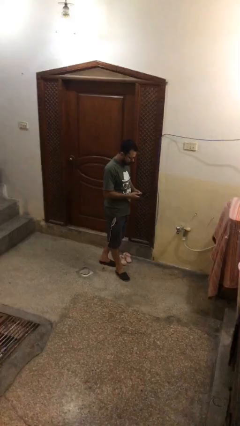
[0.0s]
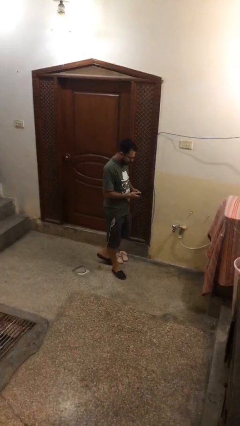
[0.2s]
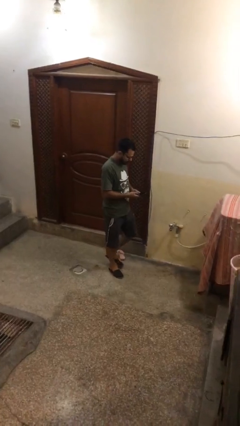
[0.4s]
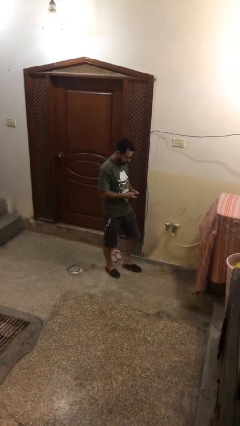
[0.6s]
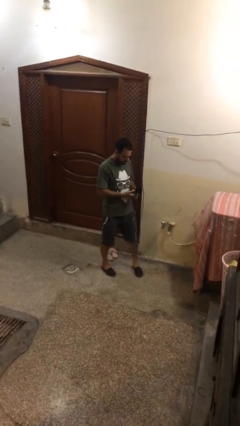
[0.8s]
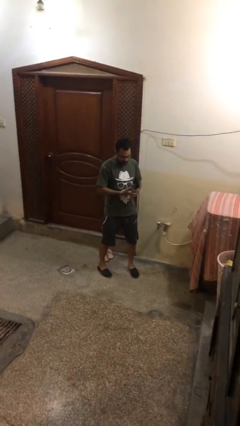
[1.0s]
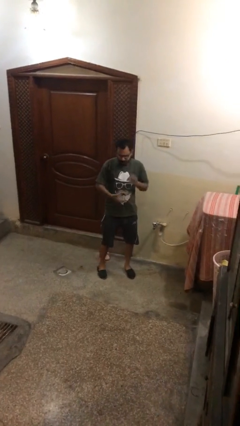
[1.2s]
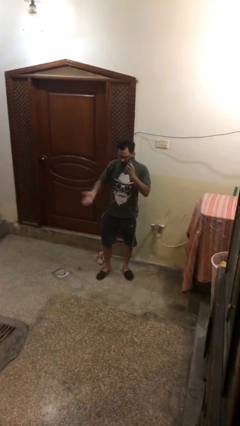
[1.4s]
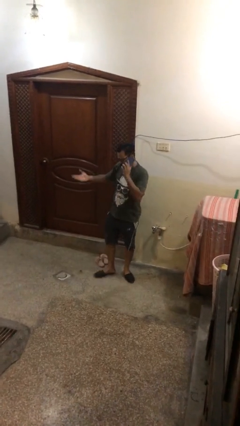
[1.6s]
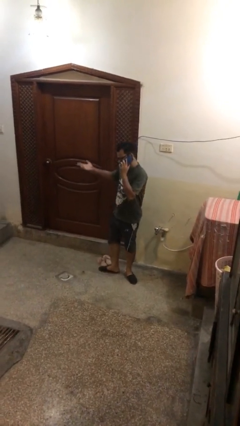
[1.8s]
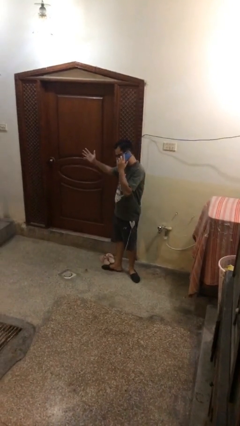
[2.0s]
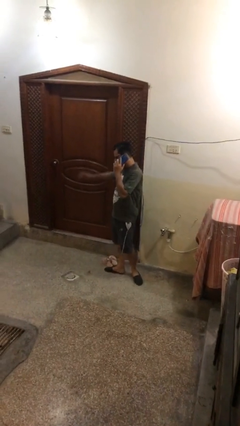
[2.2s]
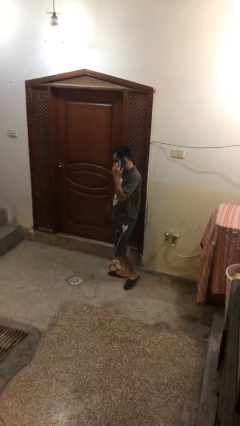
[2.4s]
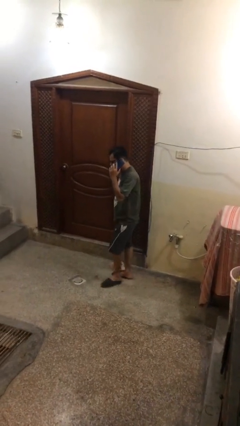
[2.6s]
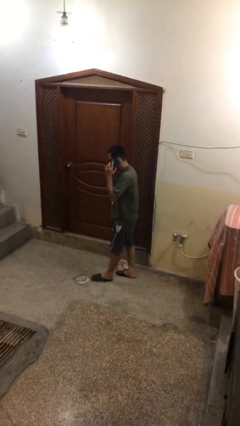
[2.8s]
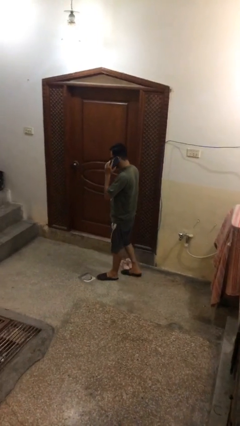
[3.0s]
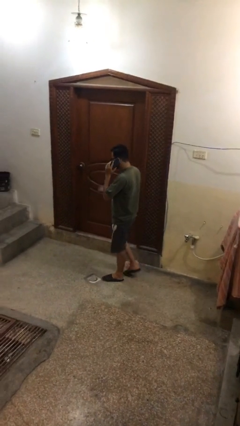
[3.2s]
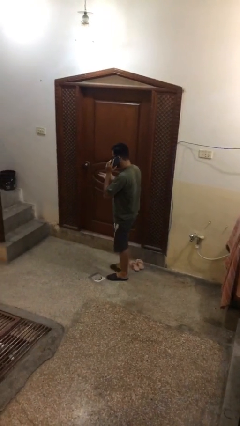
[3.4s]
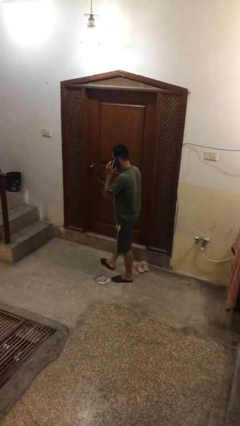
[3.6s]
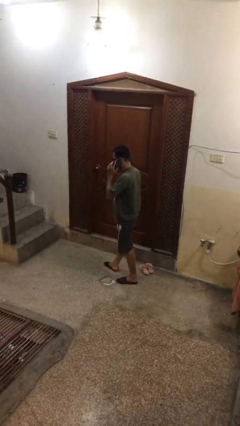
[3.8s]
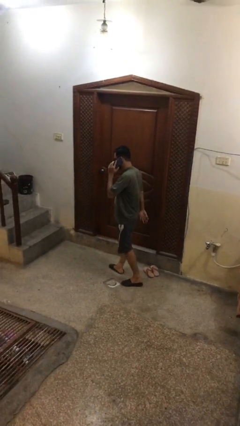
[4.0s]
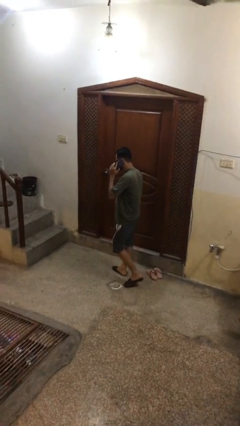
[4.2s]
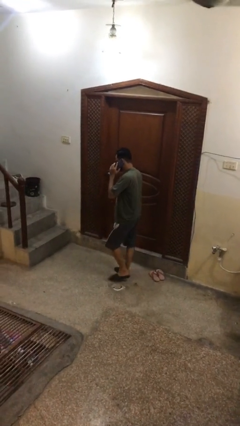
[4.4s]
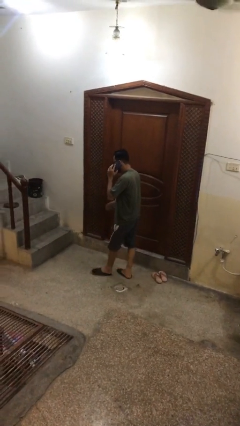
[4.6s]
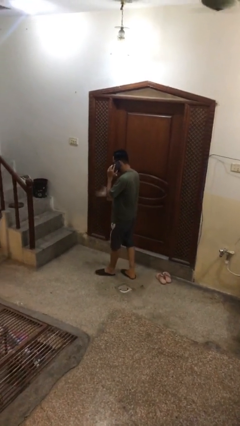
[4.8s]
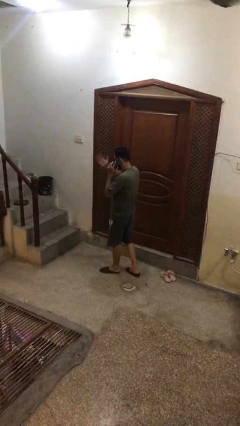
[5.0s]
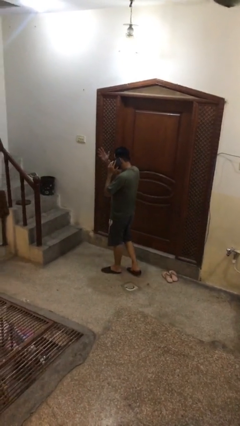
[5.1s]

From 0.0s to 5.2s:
person talks on phone

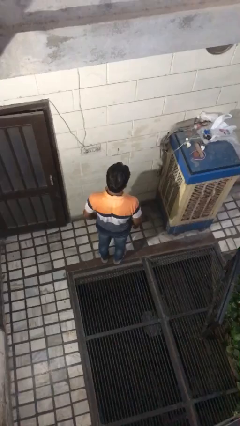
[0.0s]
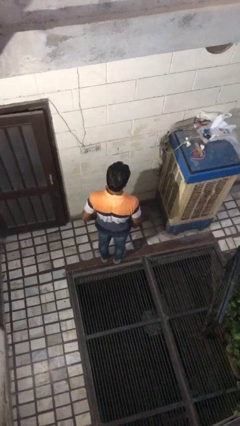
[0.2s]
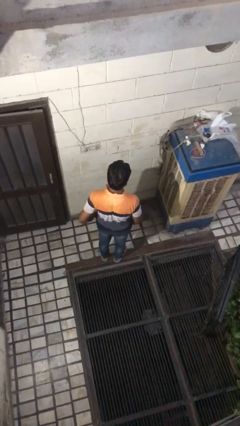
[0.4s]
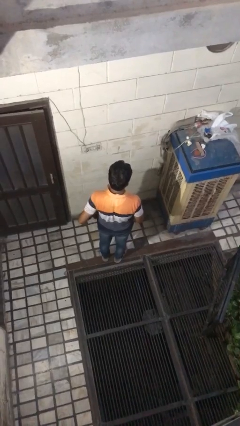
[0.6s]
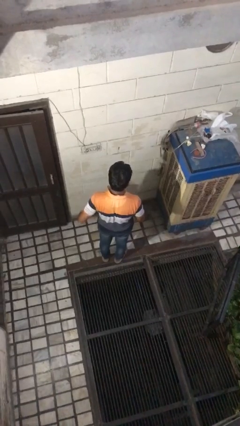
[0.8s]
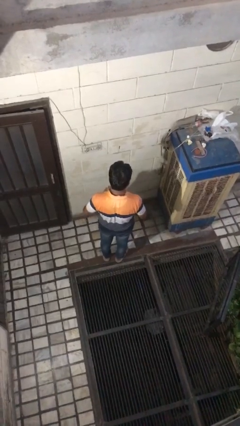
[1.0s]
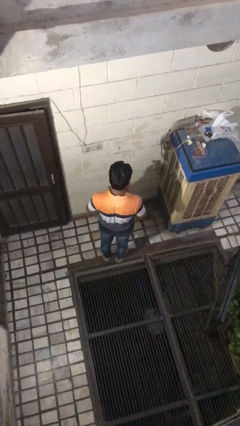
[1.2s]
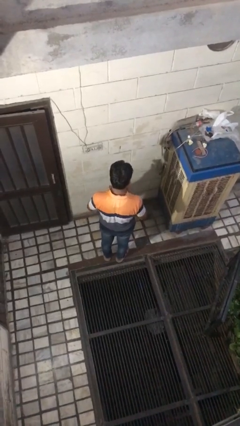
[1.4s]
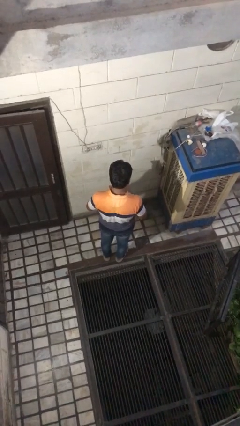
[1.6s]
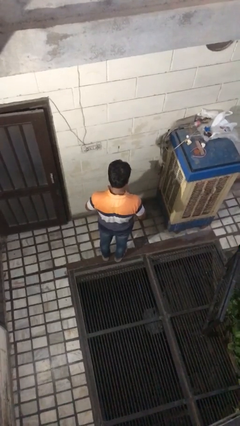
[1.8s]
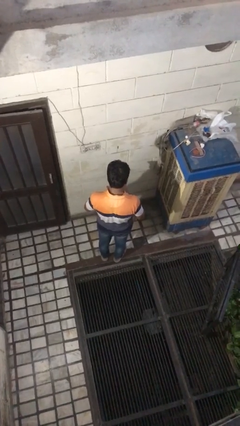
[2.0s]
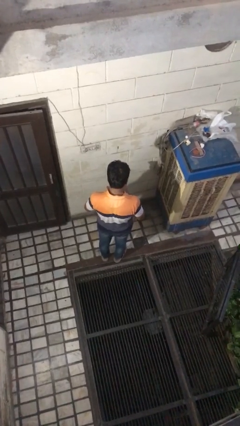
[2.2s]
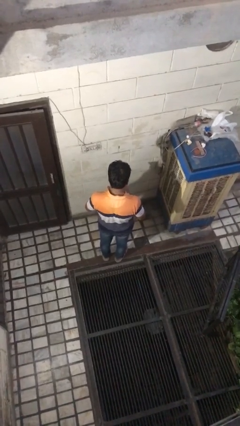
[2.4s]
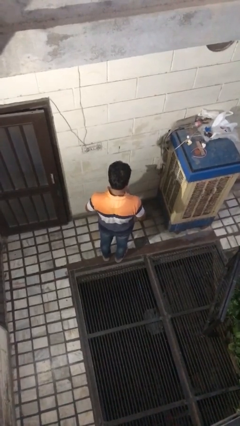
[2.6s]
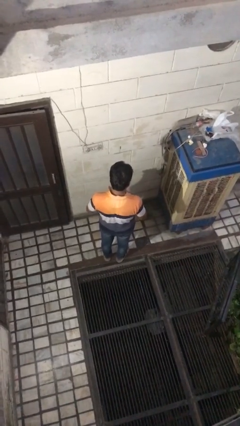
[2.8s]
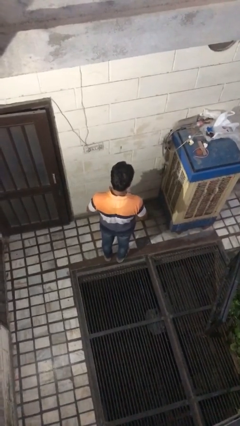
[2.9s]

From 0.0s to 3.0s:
person takes phone from pocket

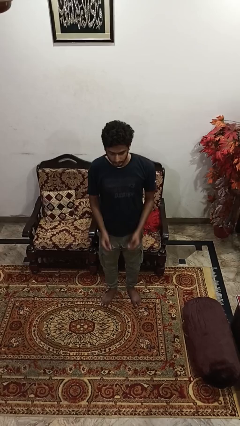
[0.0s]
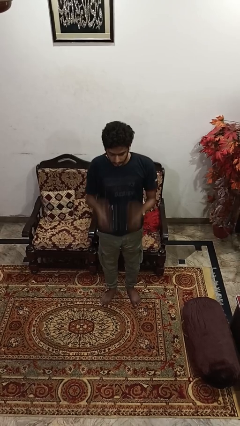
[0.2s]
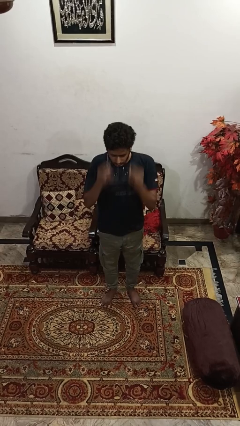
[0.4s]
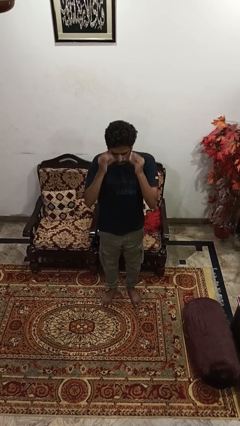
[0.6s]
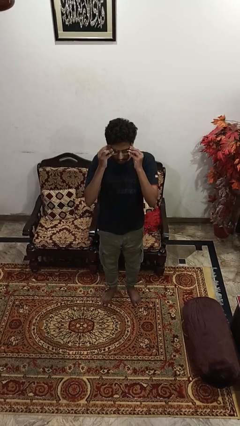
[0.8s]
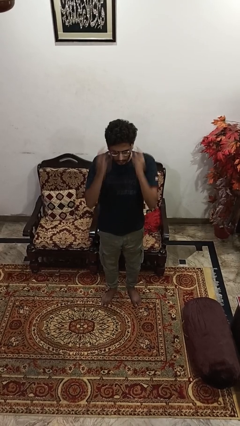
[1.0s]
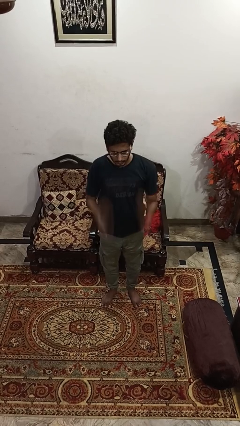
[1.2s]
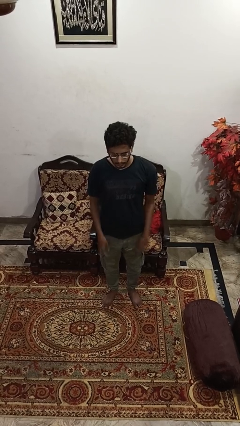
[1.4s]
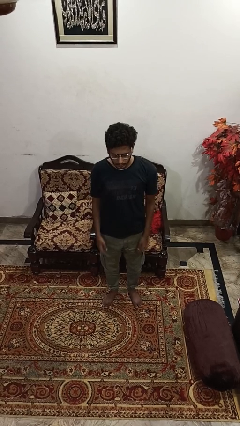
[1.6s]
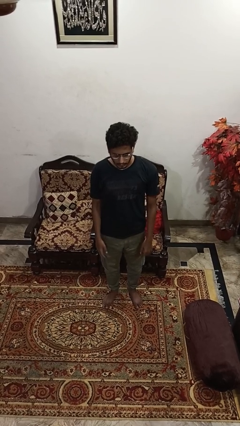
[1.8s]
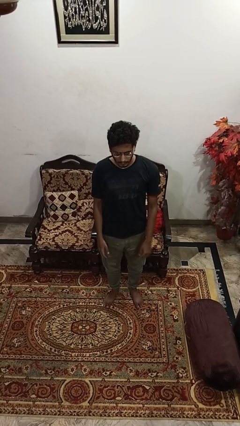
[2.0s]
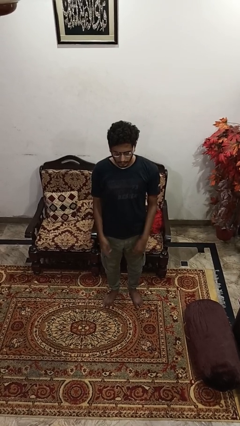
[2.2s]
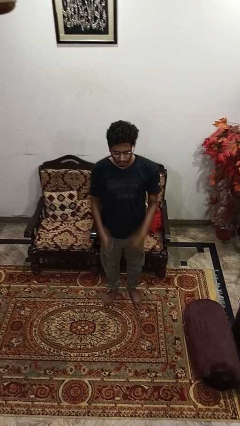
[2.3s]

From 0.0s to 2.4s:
person puts on glasses

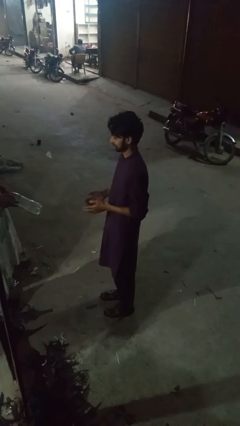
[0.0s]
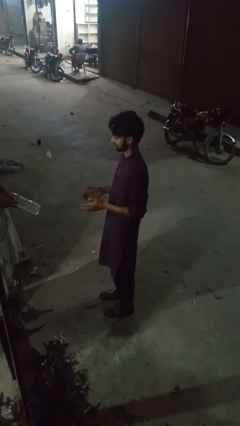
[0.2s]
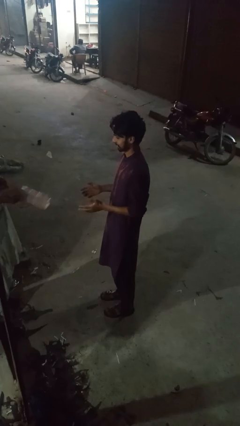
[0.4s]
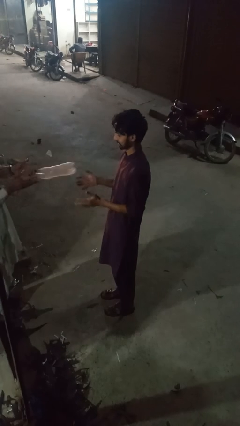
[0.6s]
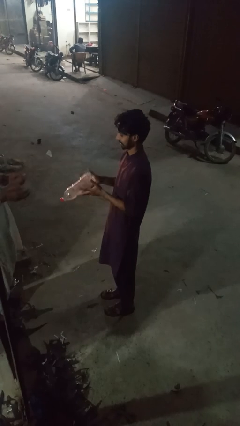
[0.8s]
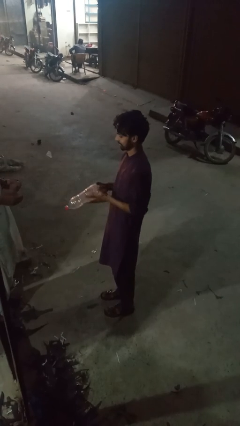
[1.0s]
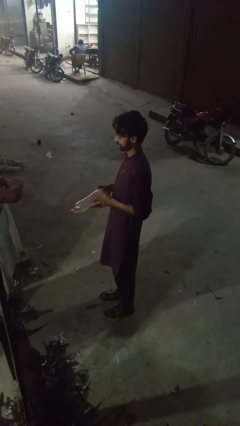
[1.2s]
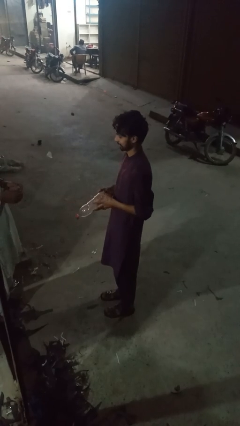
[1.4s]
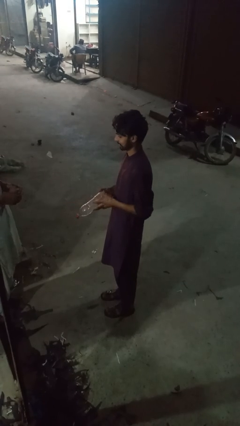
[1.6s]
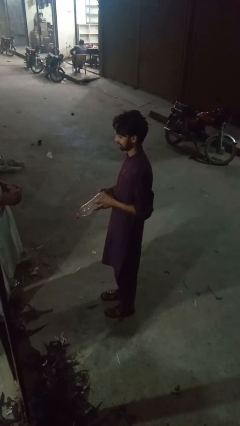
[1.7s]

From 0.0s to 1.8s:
person catches object from person

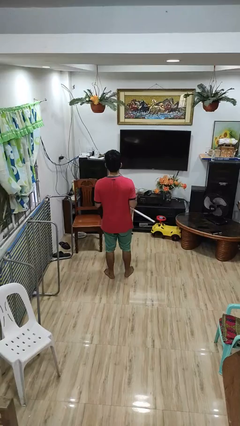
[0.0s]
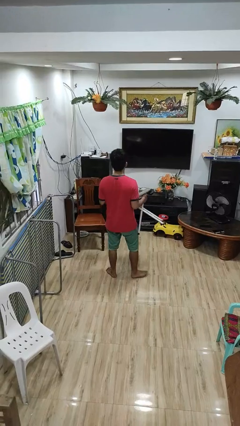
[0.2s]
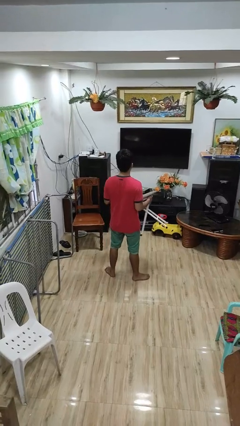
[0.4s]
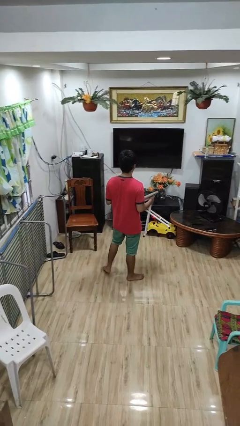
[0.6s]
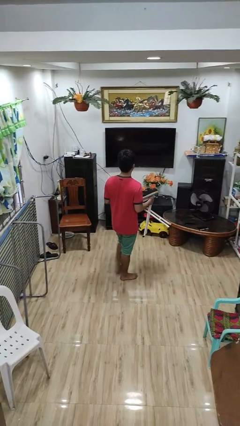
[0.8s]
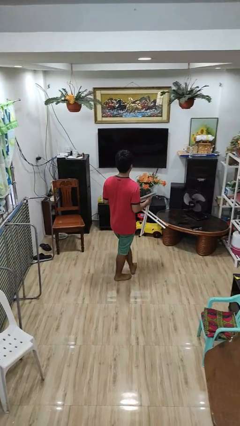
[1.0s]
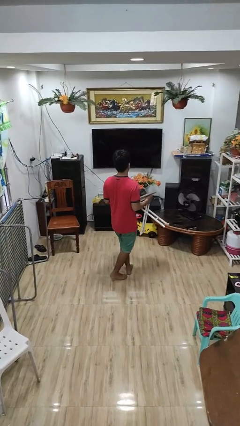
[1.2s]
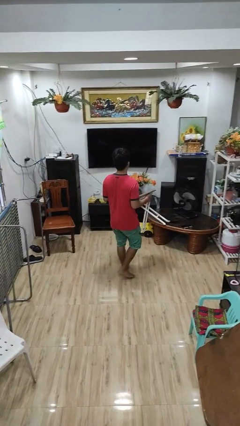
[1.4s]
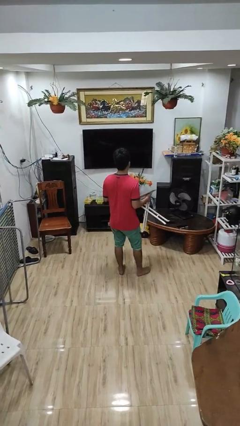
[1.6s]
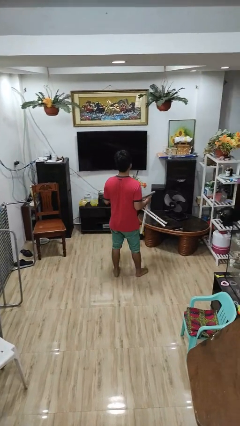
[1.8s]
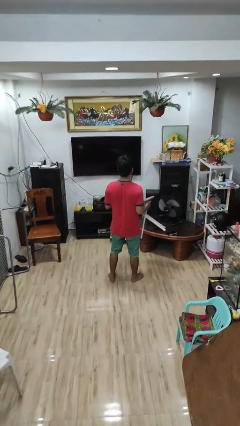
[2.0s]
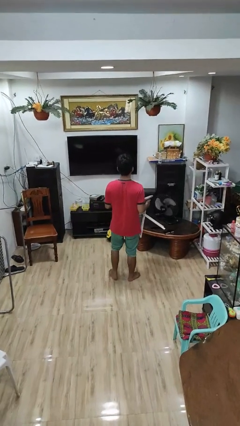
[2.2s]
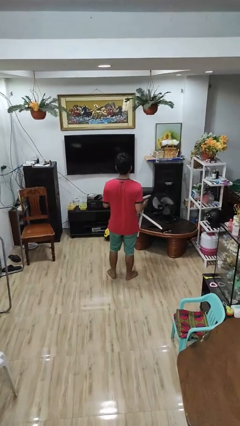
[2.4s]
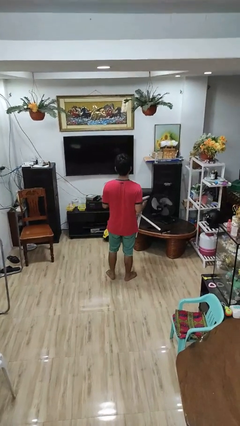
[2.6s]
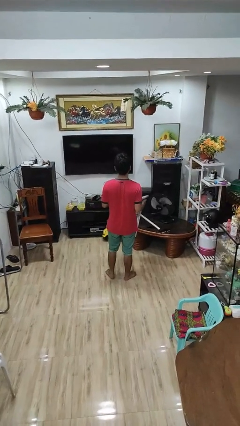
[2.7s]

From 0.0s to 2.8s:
person carries furniture

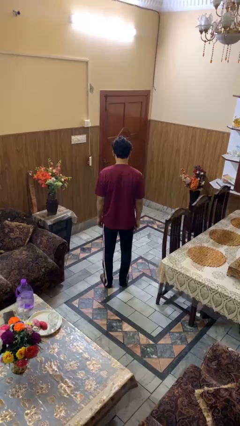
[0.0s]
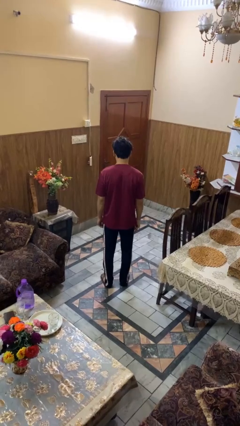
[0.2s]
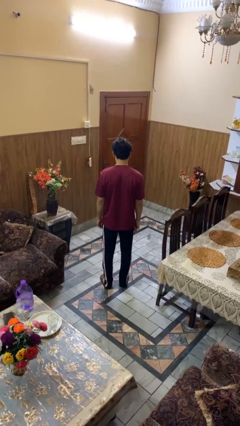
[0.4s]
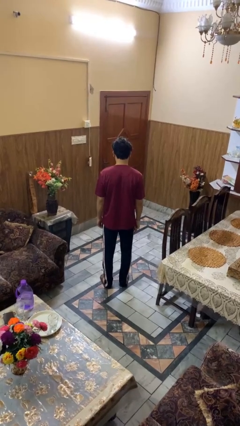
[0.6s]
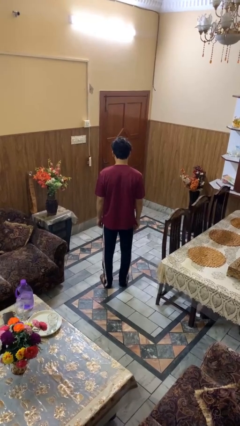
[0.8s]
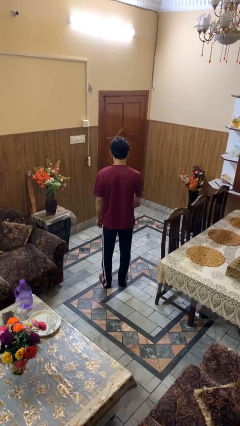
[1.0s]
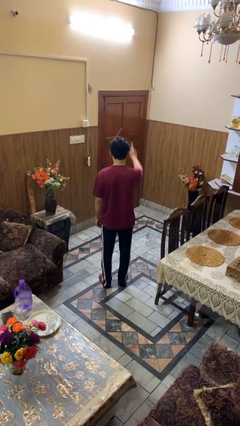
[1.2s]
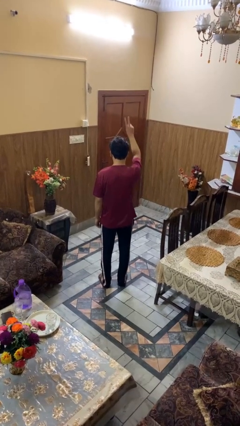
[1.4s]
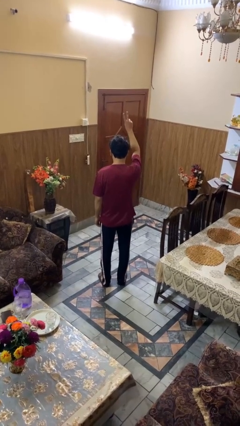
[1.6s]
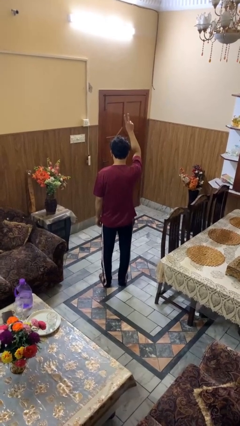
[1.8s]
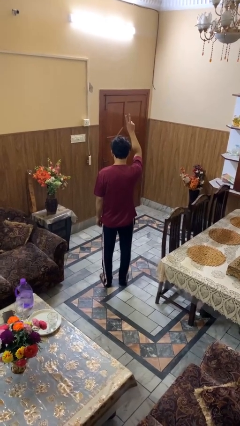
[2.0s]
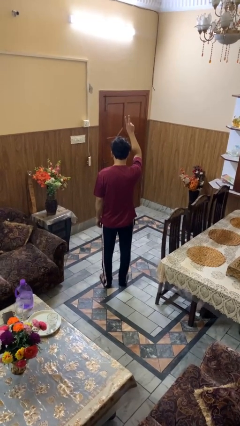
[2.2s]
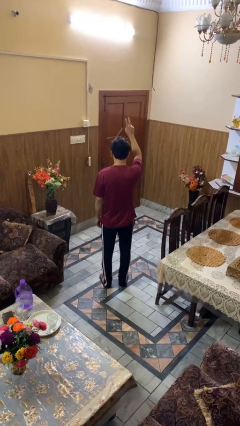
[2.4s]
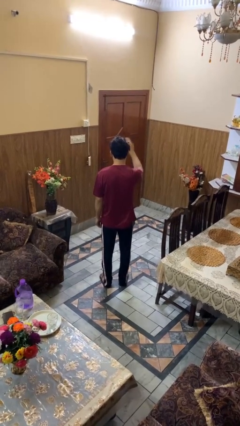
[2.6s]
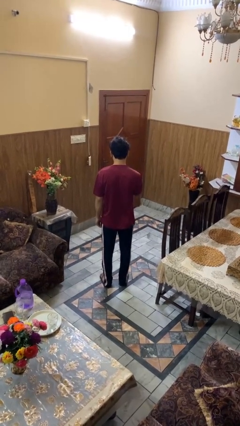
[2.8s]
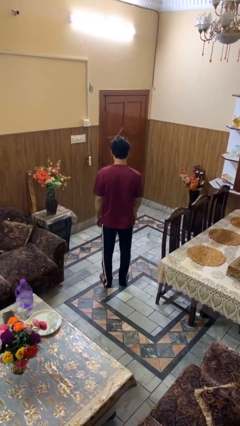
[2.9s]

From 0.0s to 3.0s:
person gestures peace
